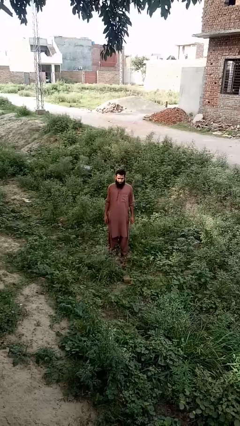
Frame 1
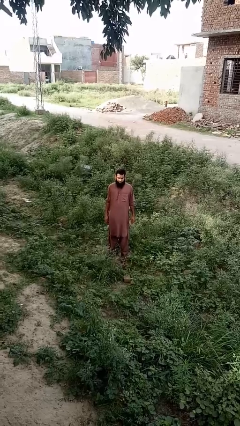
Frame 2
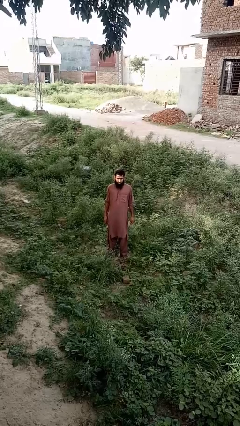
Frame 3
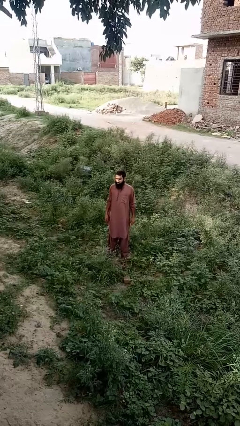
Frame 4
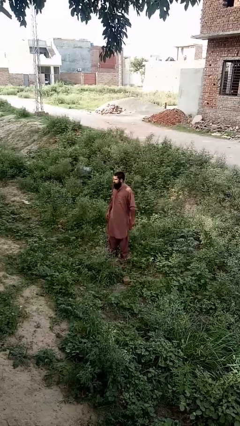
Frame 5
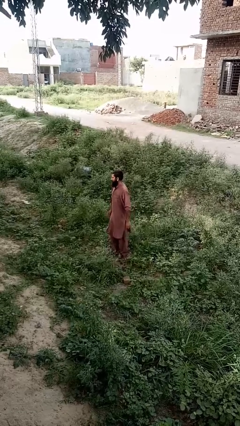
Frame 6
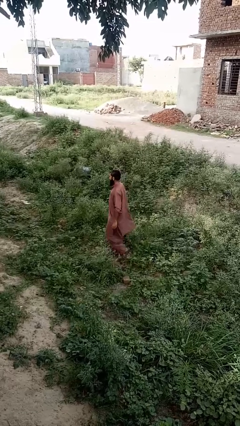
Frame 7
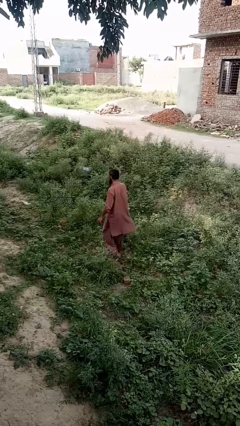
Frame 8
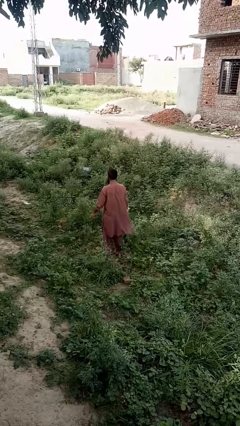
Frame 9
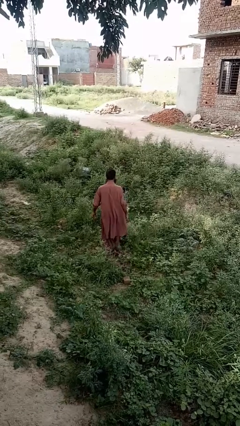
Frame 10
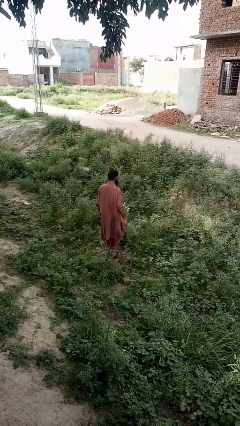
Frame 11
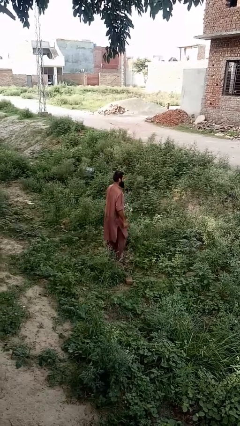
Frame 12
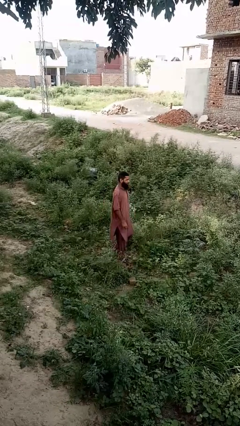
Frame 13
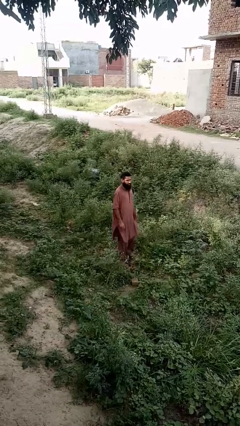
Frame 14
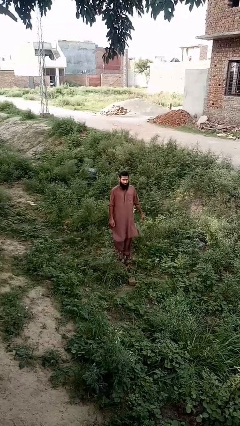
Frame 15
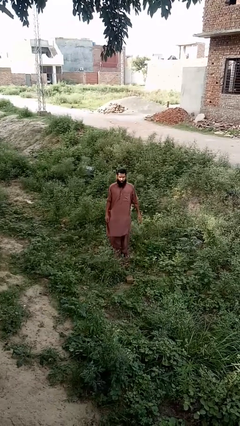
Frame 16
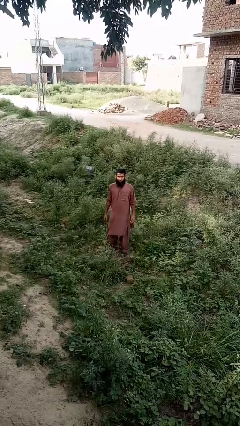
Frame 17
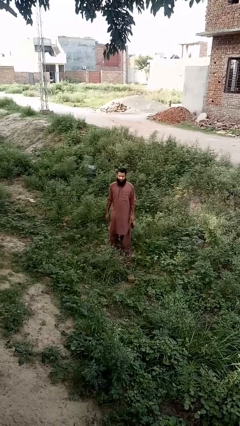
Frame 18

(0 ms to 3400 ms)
person twirls

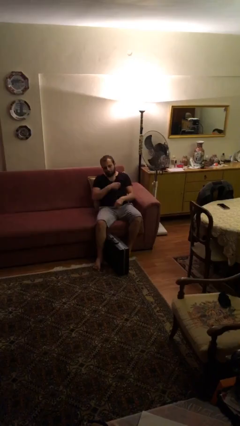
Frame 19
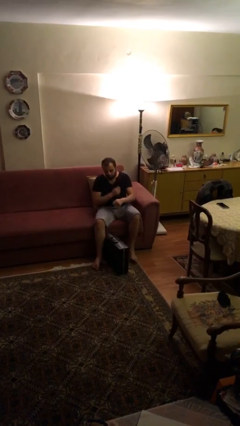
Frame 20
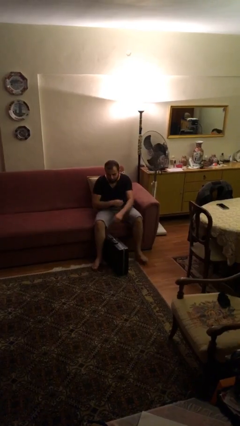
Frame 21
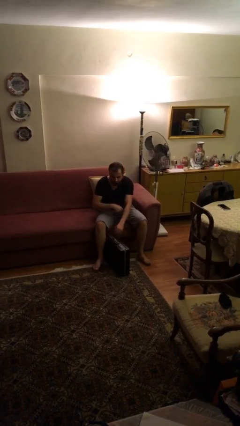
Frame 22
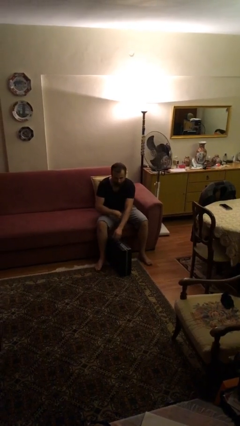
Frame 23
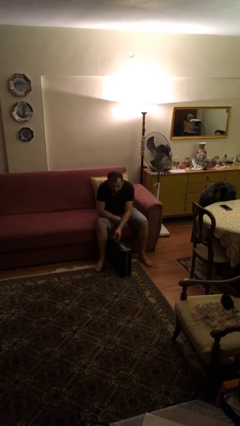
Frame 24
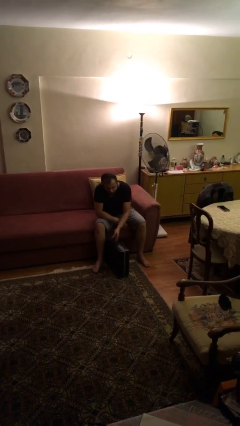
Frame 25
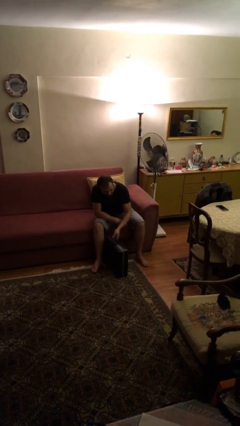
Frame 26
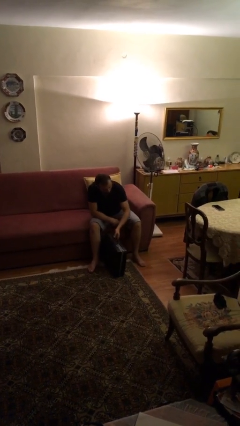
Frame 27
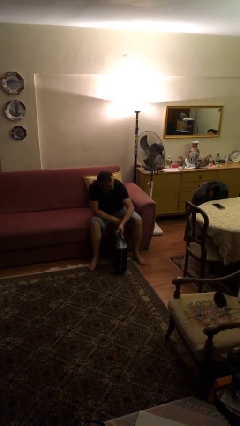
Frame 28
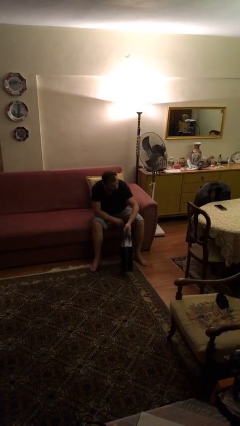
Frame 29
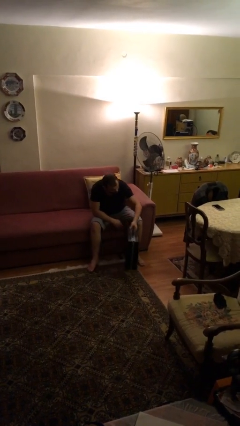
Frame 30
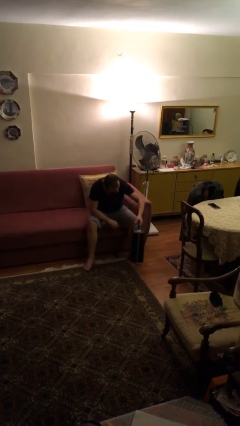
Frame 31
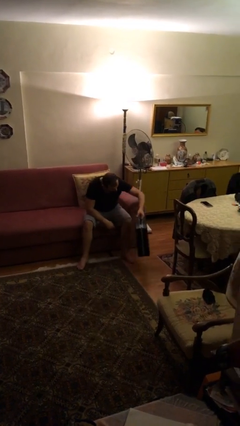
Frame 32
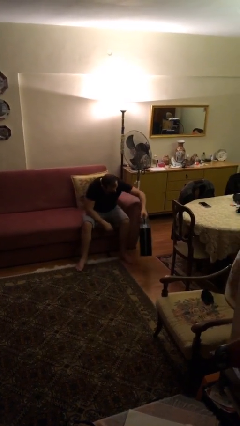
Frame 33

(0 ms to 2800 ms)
person picks up object from floor

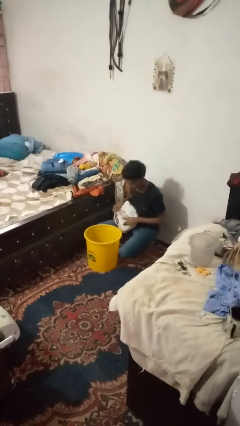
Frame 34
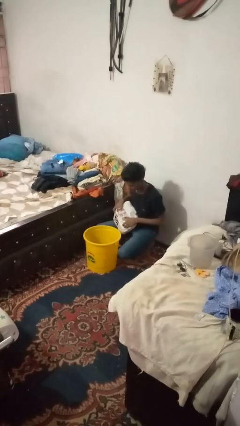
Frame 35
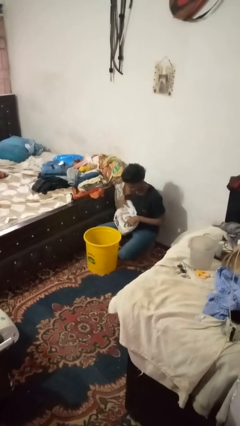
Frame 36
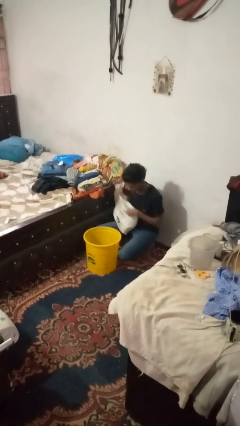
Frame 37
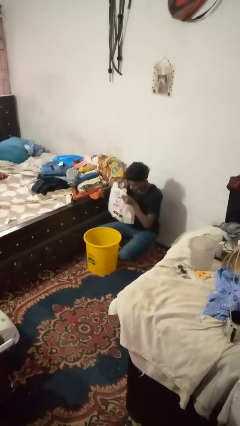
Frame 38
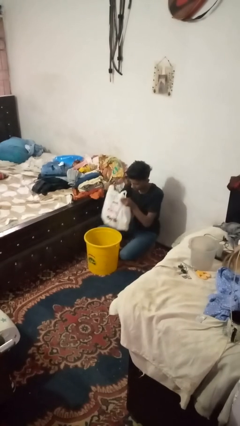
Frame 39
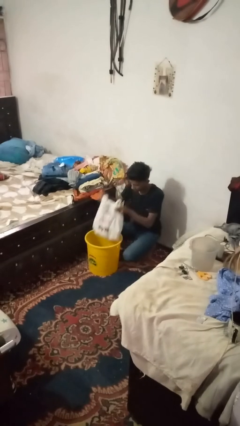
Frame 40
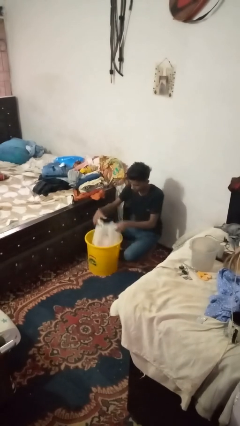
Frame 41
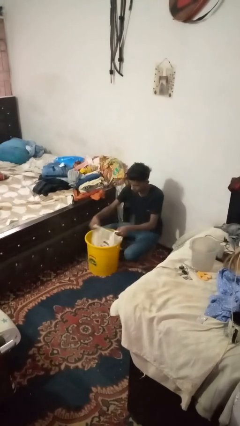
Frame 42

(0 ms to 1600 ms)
person inserts trashbag into trashcan

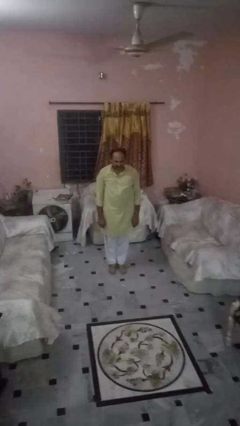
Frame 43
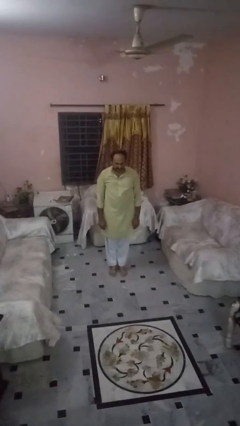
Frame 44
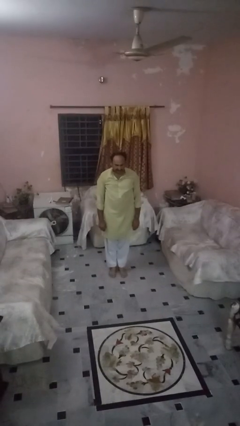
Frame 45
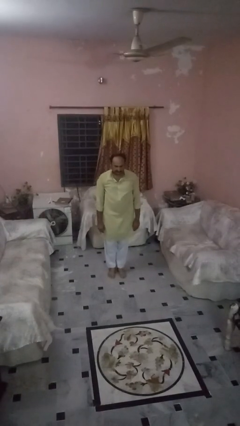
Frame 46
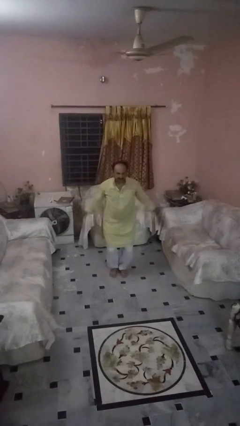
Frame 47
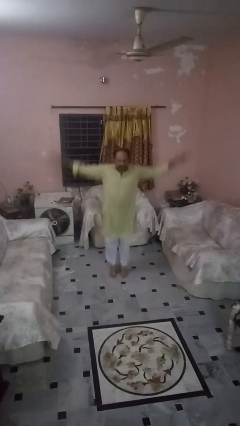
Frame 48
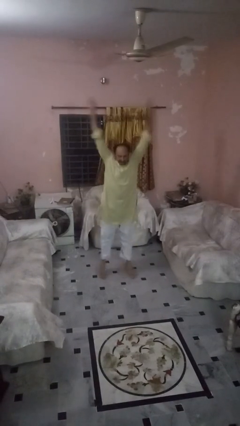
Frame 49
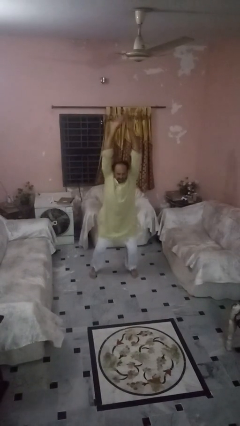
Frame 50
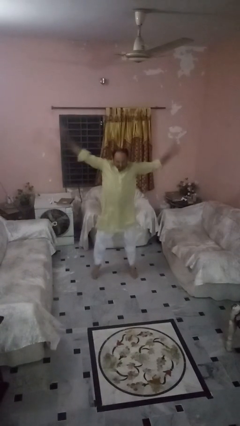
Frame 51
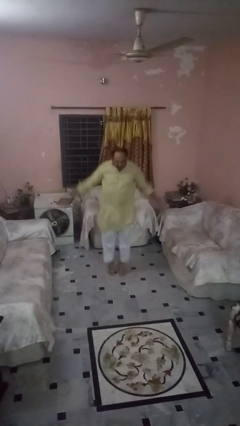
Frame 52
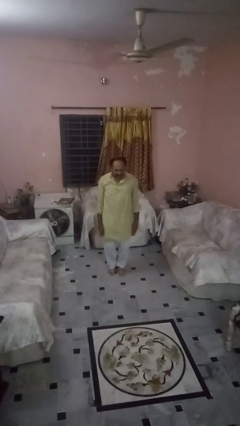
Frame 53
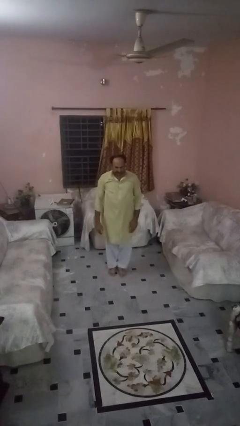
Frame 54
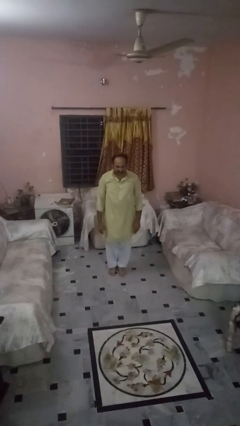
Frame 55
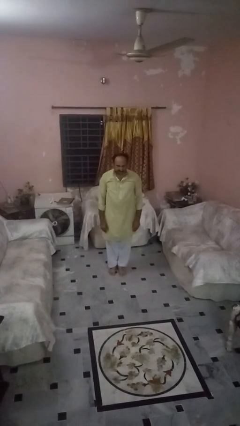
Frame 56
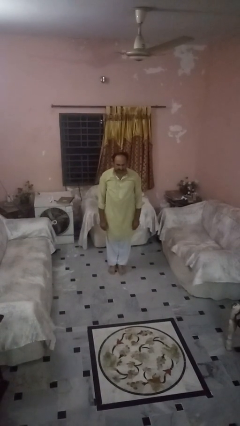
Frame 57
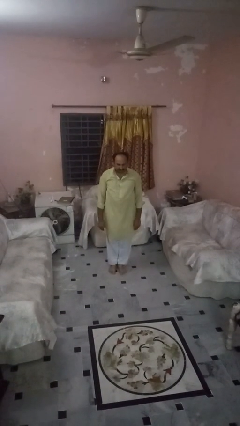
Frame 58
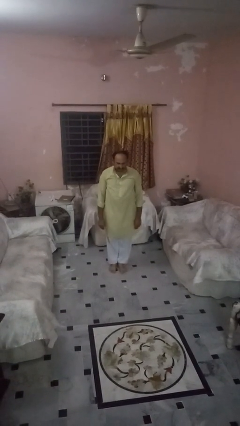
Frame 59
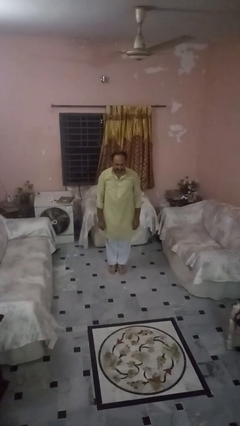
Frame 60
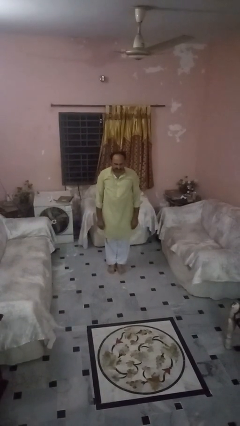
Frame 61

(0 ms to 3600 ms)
person exercises with jumping jacks

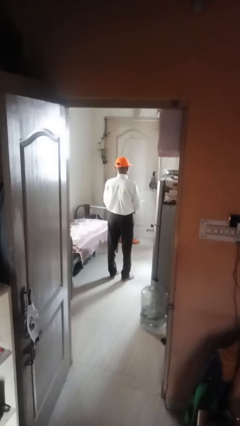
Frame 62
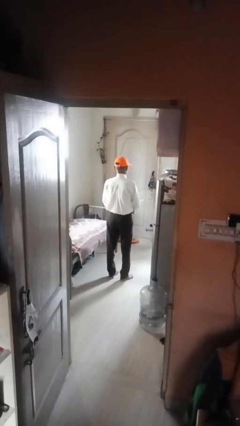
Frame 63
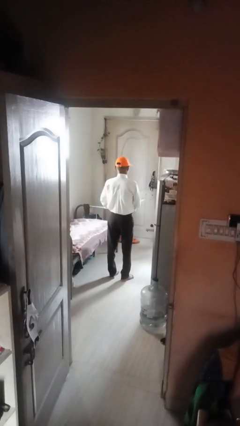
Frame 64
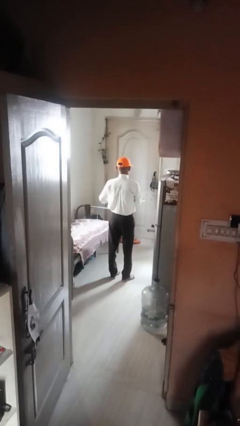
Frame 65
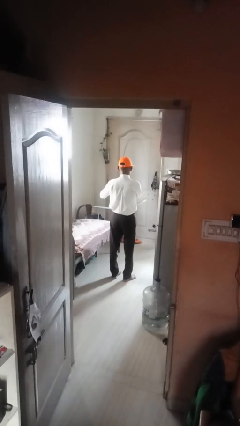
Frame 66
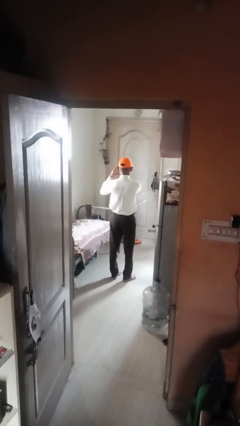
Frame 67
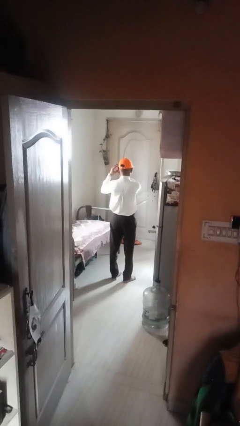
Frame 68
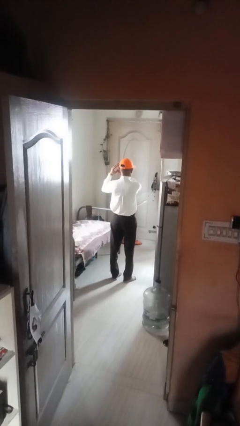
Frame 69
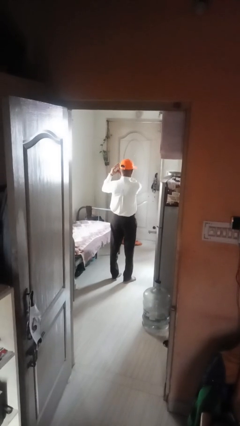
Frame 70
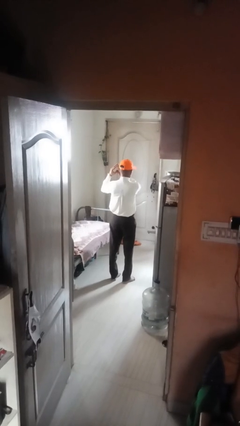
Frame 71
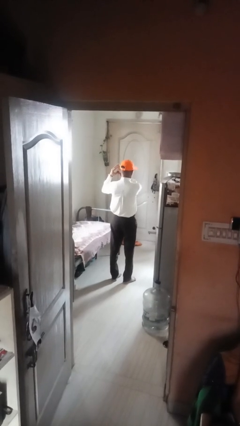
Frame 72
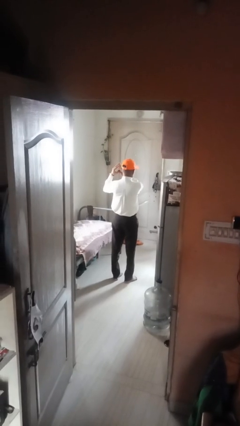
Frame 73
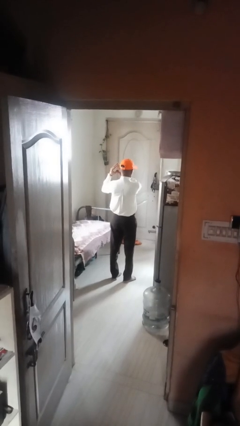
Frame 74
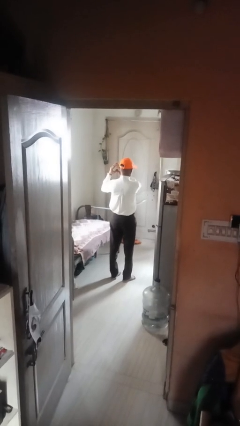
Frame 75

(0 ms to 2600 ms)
person gestures heart

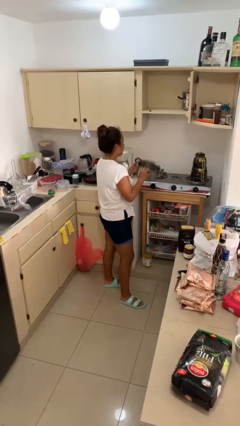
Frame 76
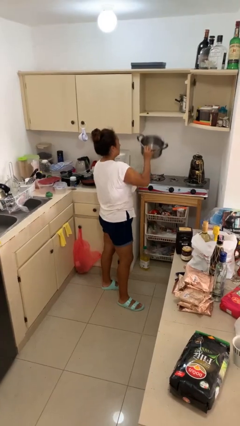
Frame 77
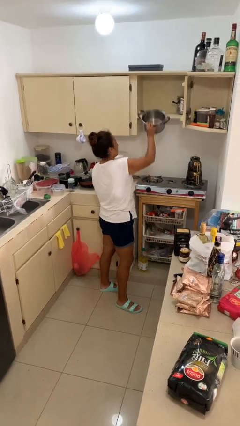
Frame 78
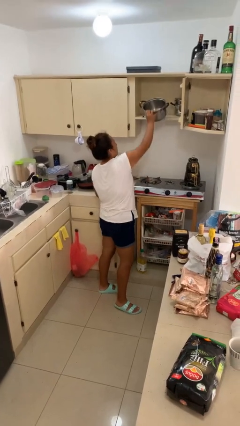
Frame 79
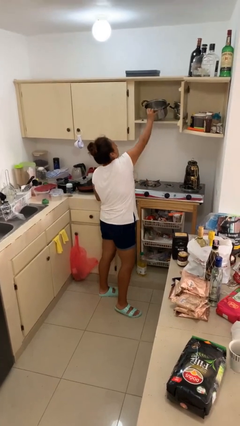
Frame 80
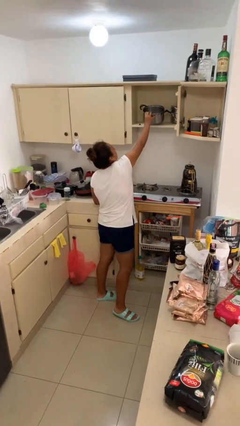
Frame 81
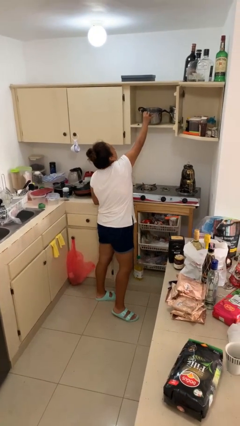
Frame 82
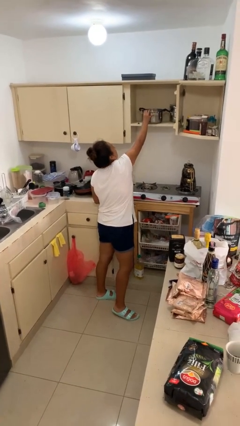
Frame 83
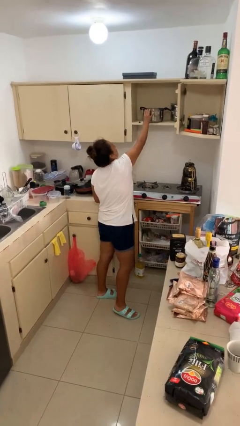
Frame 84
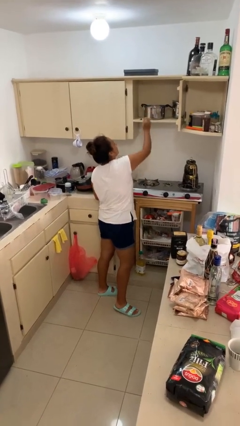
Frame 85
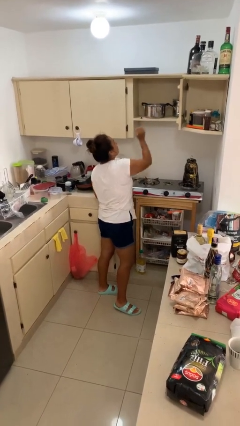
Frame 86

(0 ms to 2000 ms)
person puts down object into cabinet

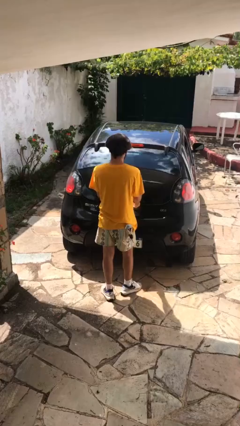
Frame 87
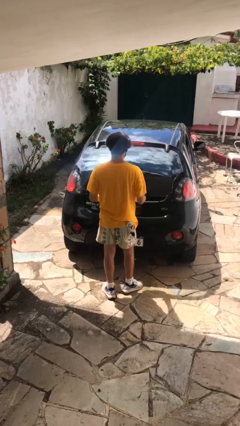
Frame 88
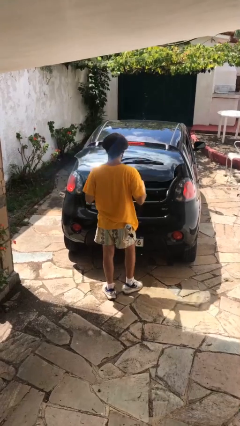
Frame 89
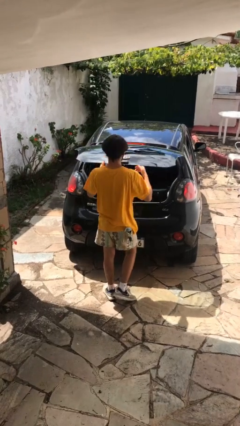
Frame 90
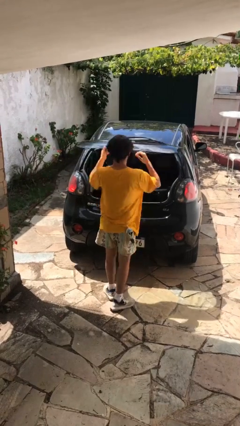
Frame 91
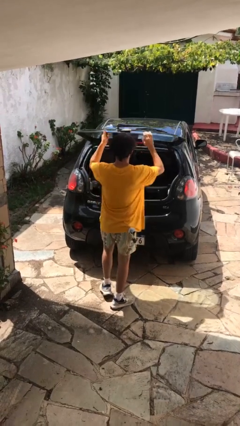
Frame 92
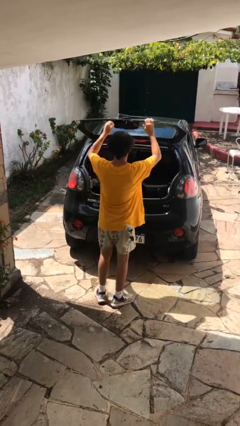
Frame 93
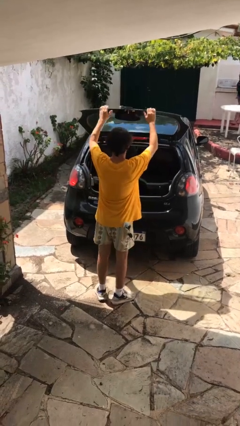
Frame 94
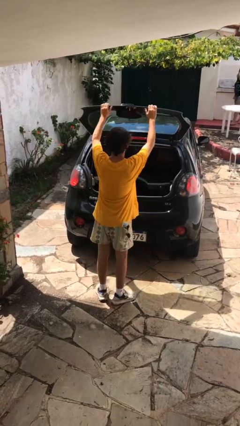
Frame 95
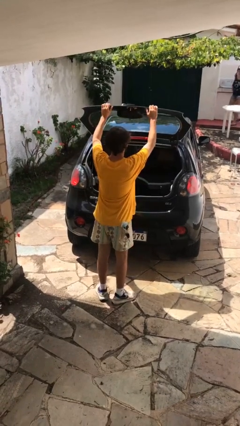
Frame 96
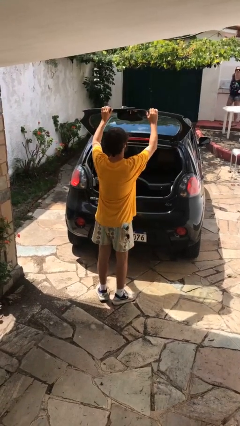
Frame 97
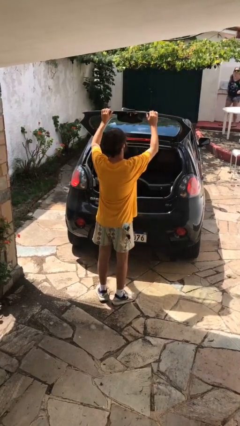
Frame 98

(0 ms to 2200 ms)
person opens car trunk
